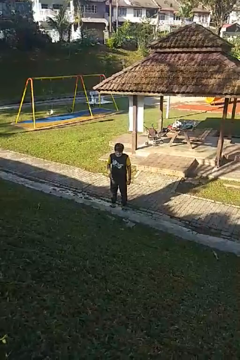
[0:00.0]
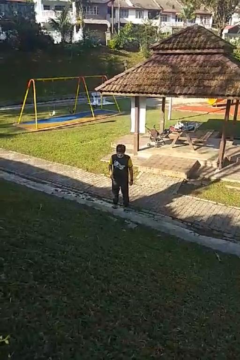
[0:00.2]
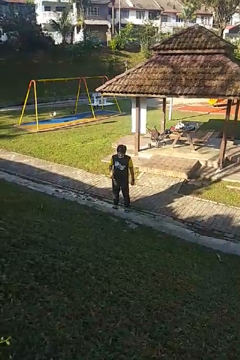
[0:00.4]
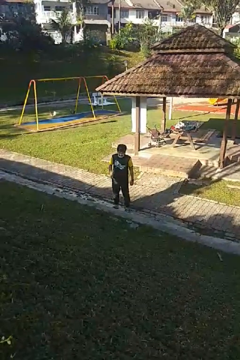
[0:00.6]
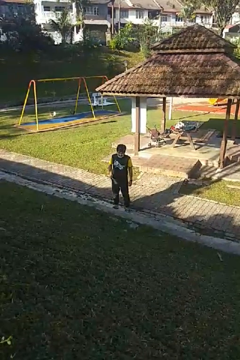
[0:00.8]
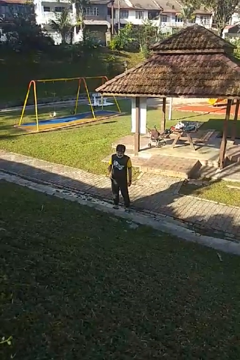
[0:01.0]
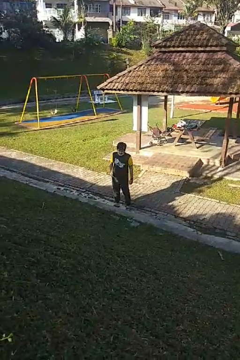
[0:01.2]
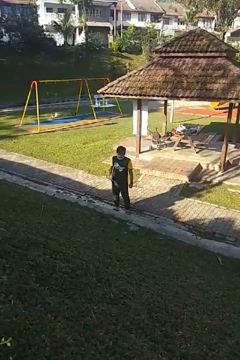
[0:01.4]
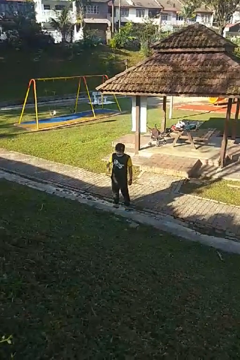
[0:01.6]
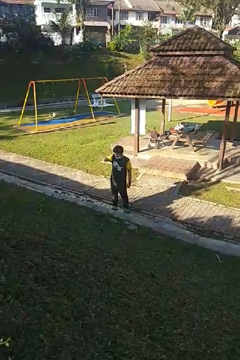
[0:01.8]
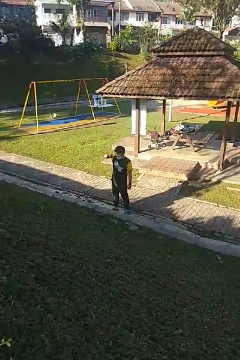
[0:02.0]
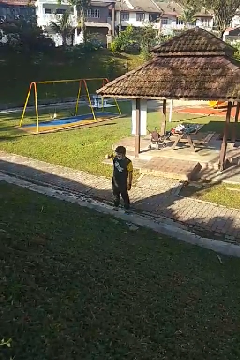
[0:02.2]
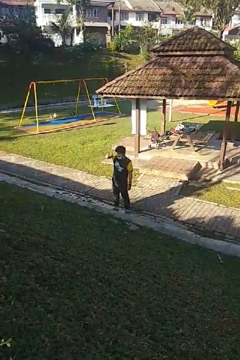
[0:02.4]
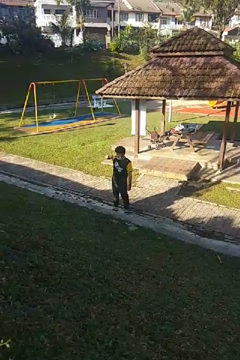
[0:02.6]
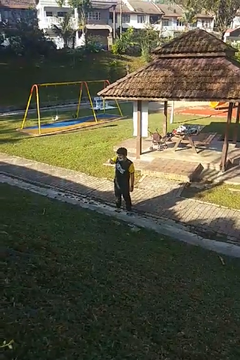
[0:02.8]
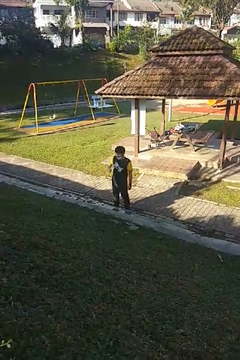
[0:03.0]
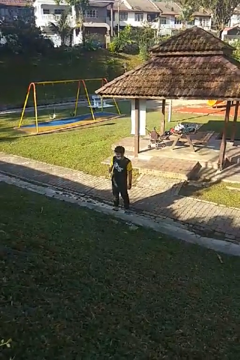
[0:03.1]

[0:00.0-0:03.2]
person brushes teeth

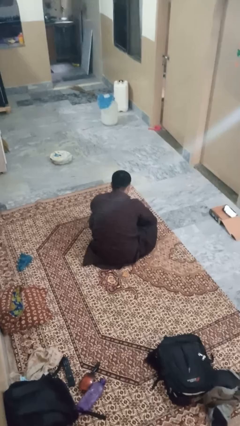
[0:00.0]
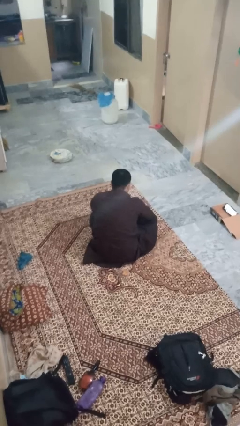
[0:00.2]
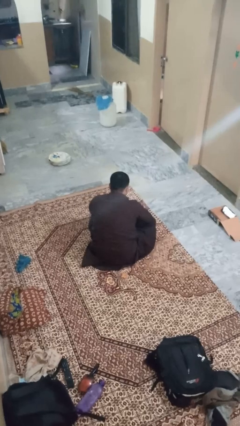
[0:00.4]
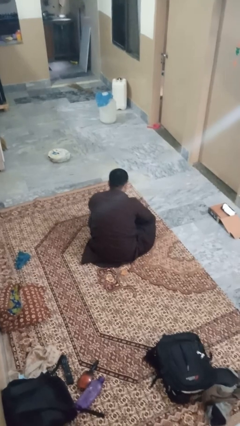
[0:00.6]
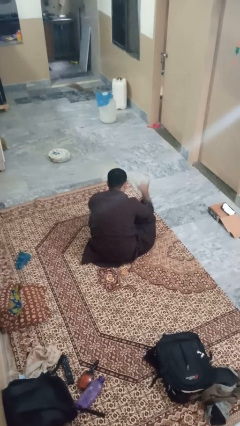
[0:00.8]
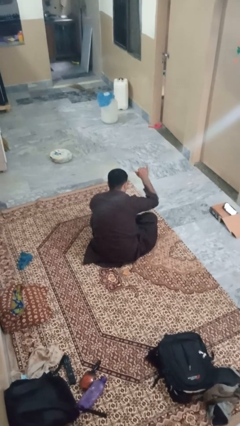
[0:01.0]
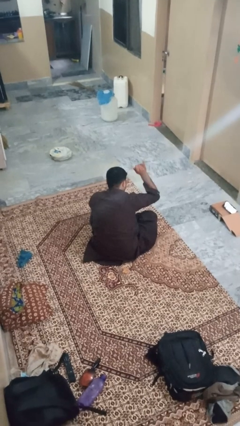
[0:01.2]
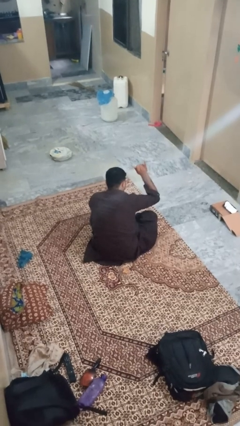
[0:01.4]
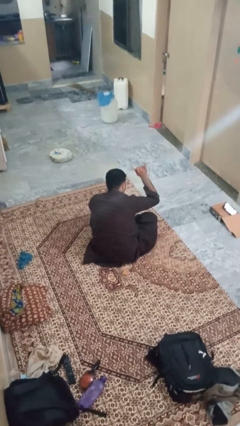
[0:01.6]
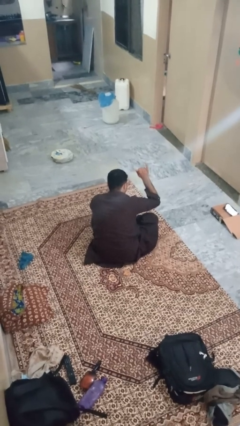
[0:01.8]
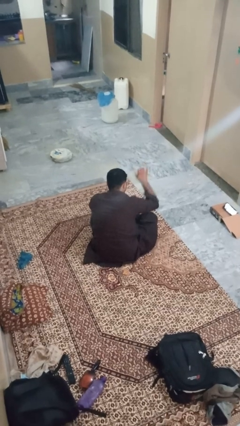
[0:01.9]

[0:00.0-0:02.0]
person gestures hang loose

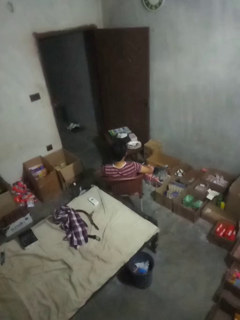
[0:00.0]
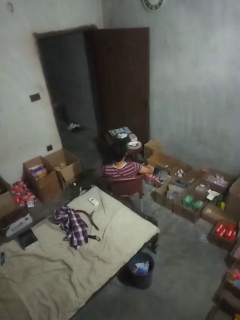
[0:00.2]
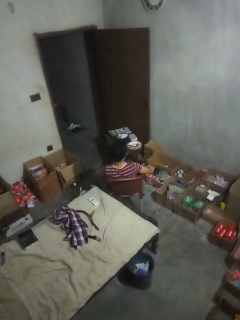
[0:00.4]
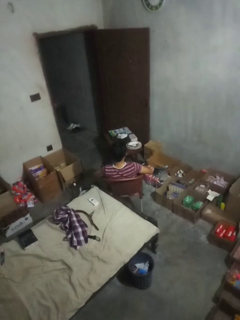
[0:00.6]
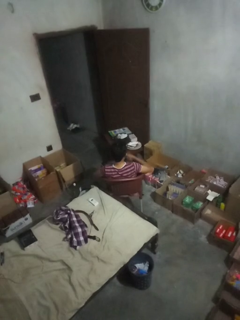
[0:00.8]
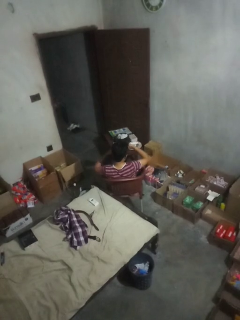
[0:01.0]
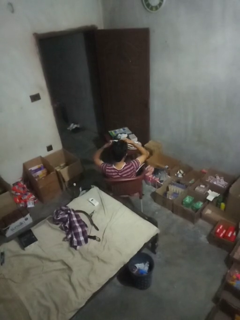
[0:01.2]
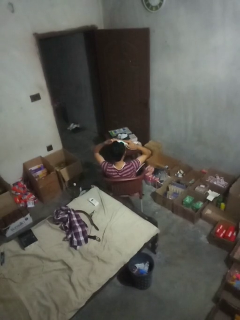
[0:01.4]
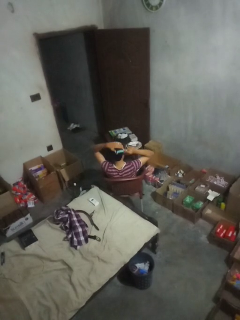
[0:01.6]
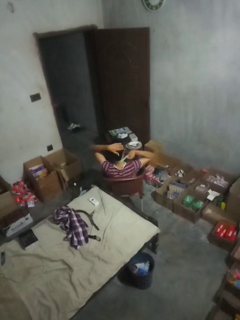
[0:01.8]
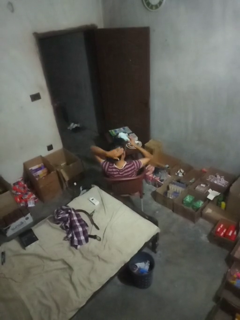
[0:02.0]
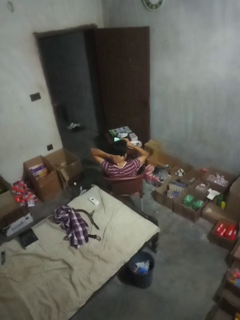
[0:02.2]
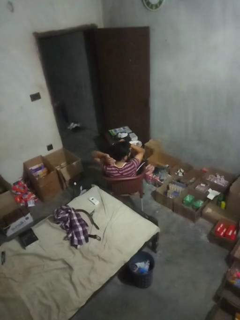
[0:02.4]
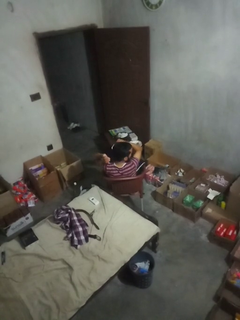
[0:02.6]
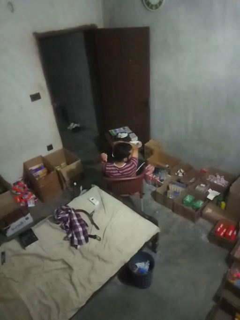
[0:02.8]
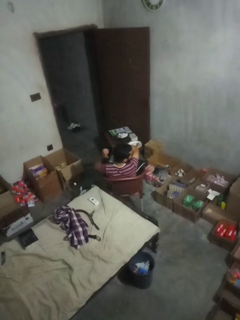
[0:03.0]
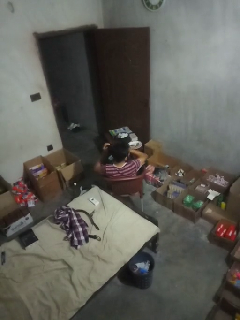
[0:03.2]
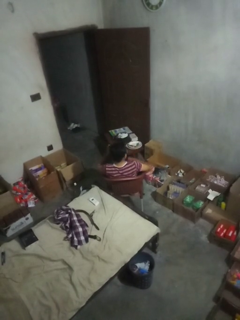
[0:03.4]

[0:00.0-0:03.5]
person brushes hair

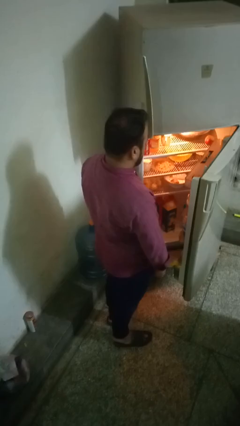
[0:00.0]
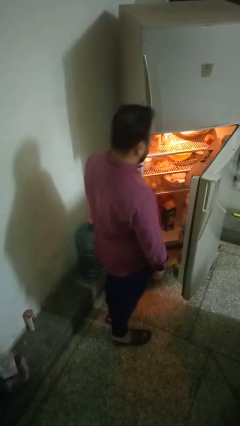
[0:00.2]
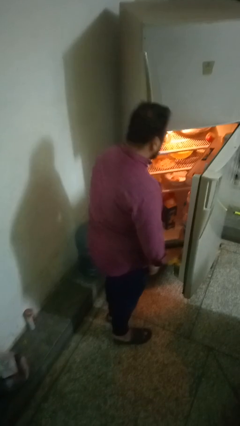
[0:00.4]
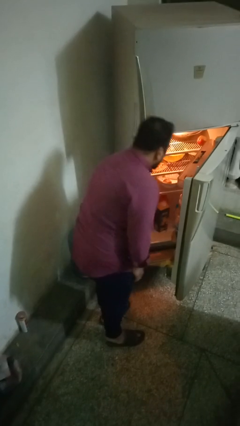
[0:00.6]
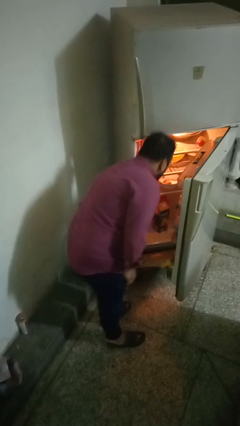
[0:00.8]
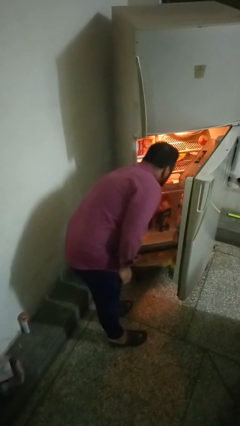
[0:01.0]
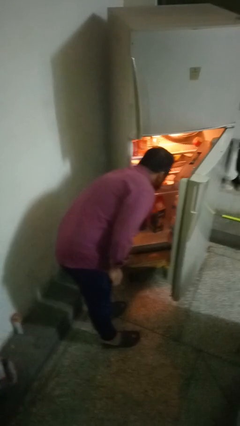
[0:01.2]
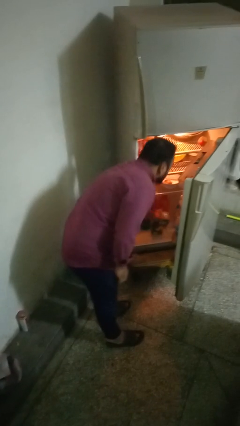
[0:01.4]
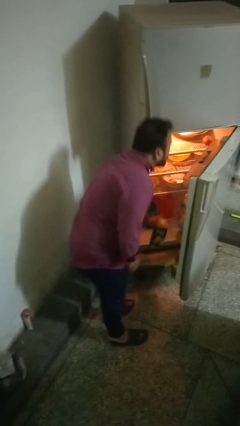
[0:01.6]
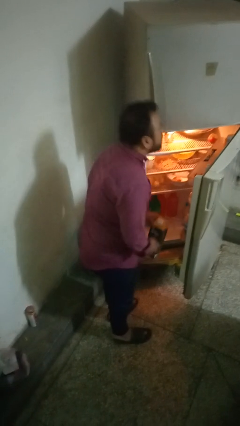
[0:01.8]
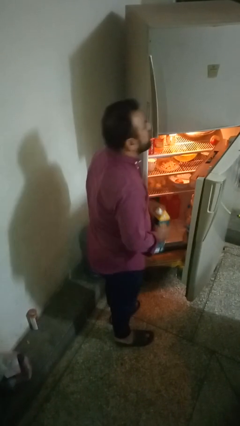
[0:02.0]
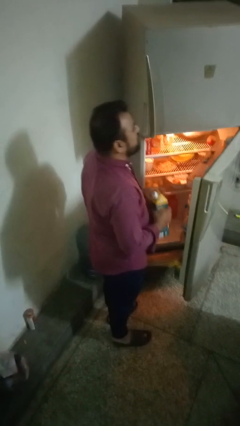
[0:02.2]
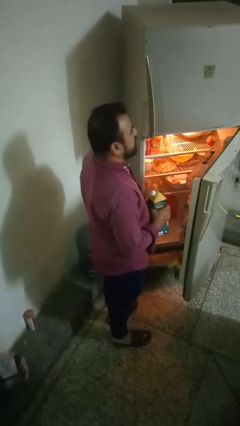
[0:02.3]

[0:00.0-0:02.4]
person takes object from refrigerator

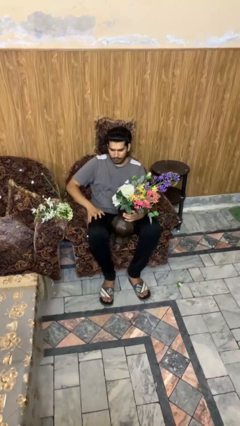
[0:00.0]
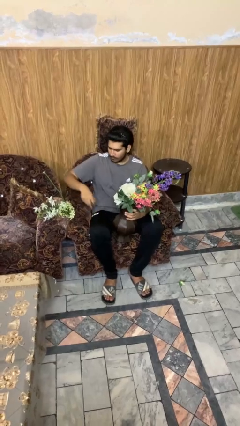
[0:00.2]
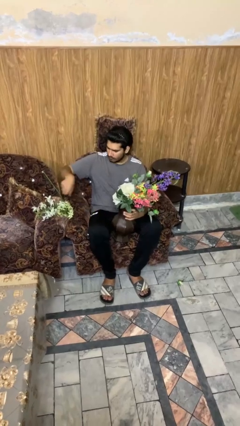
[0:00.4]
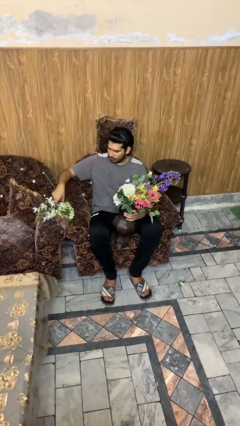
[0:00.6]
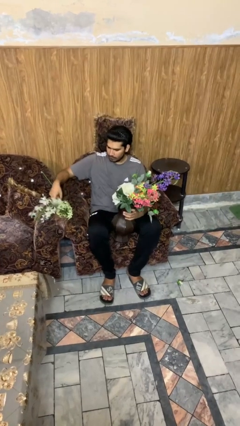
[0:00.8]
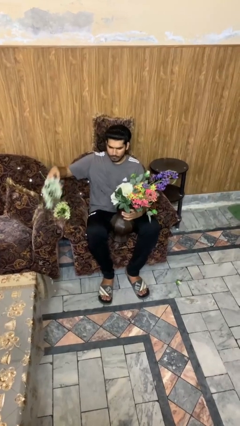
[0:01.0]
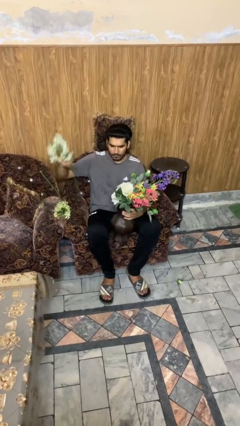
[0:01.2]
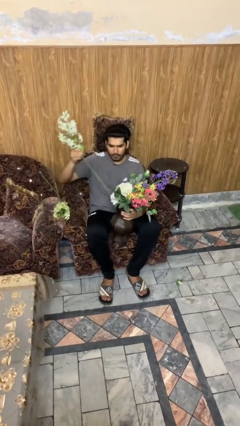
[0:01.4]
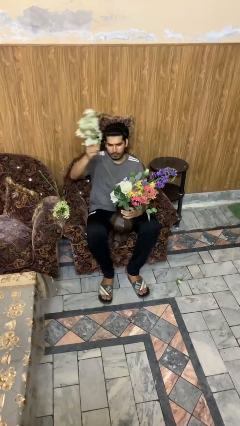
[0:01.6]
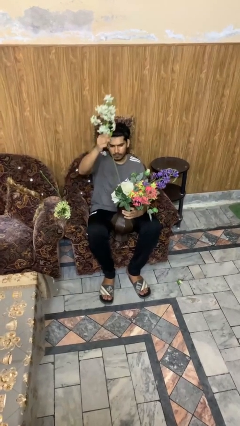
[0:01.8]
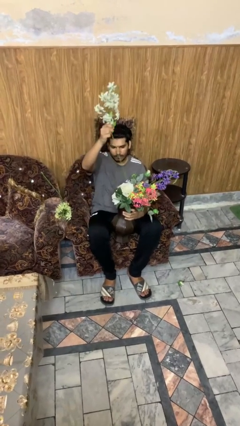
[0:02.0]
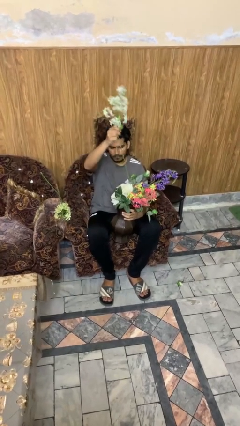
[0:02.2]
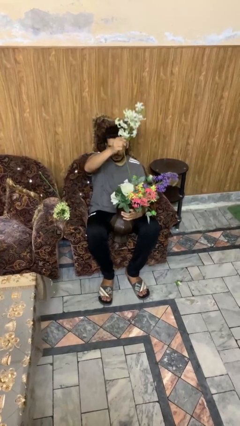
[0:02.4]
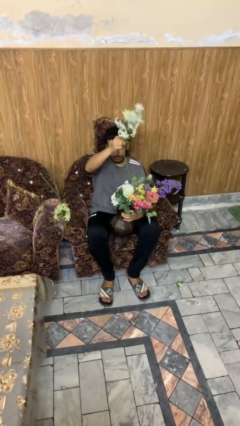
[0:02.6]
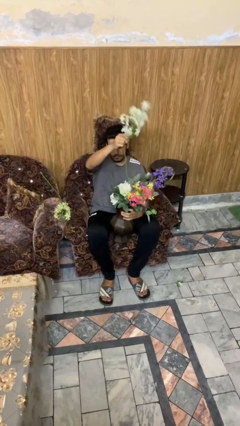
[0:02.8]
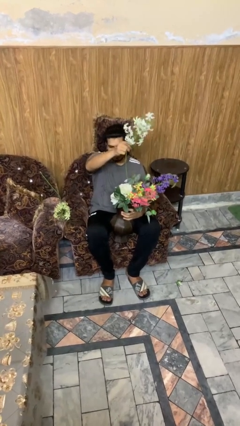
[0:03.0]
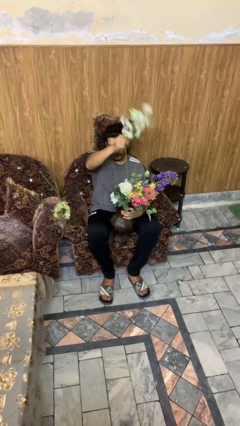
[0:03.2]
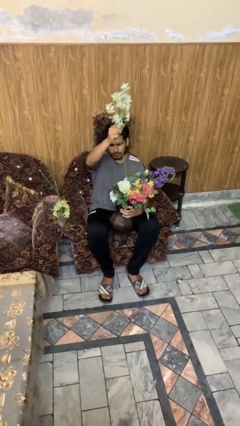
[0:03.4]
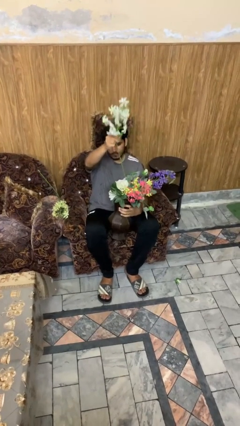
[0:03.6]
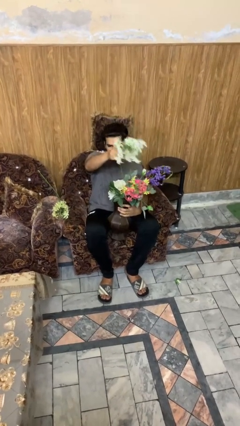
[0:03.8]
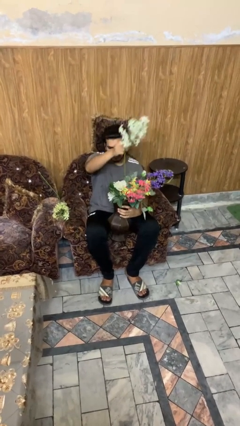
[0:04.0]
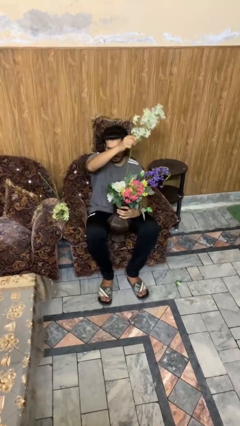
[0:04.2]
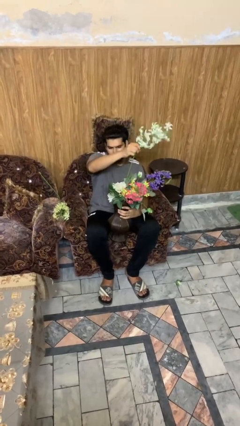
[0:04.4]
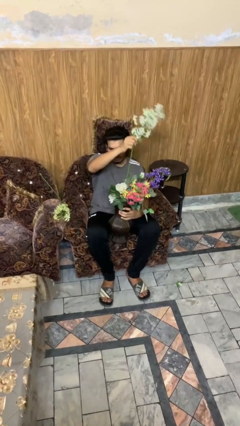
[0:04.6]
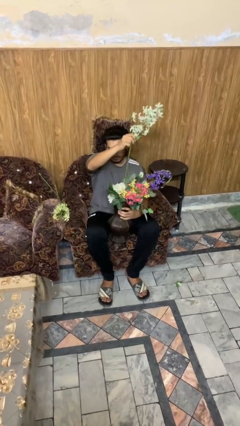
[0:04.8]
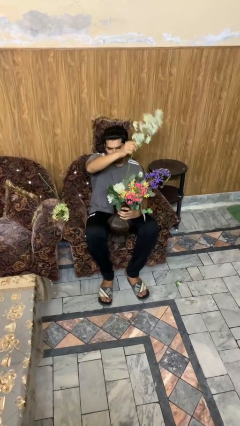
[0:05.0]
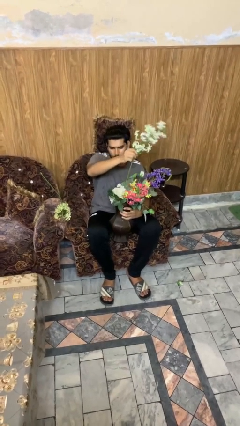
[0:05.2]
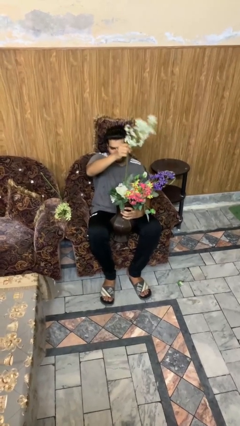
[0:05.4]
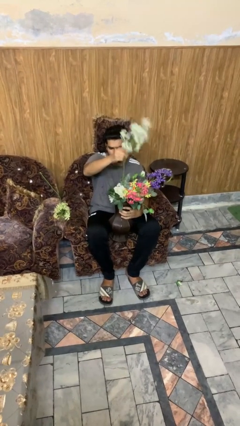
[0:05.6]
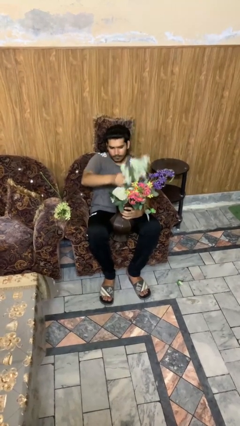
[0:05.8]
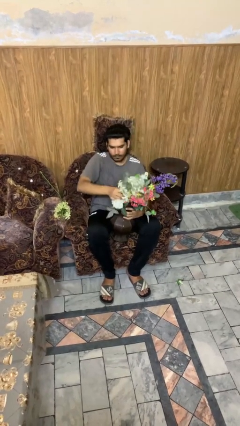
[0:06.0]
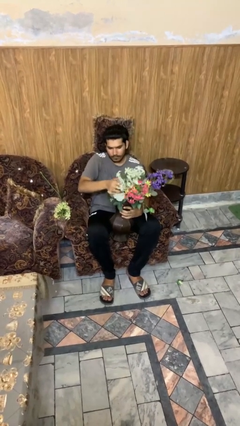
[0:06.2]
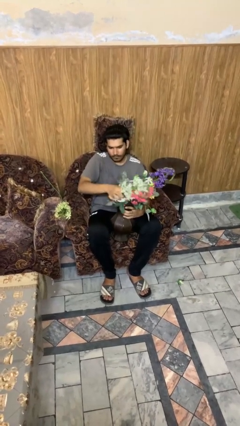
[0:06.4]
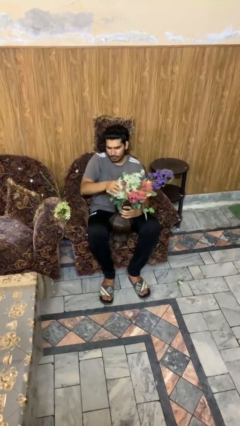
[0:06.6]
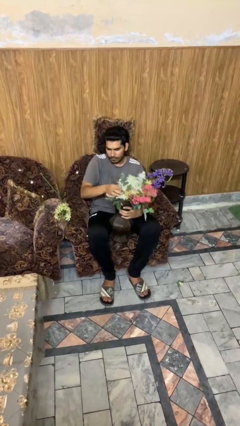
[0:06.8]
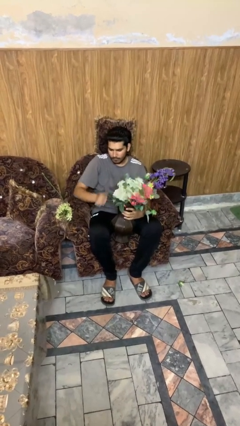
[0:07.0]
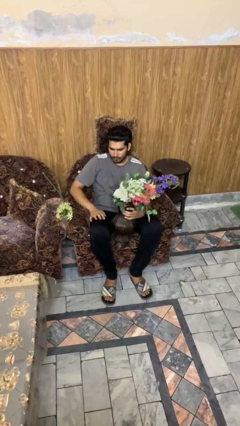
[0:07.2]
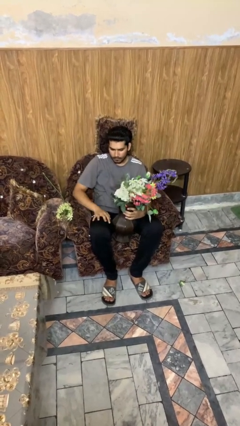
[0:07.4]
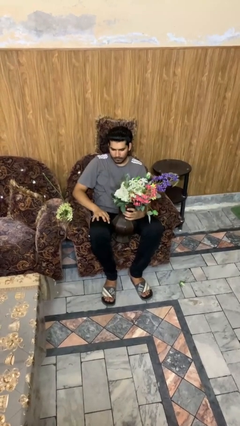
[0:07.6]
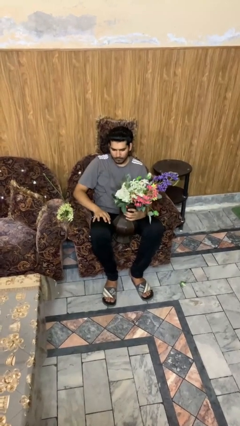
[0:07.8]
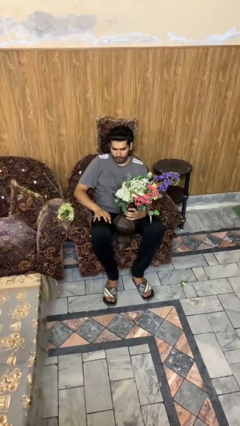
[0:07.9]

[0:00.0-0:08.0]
person arranges flowers in vase
